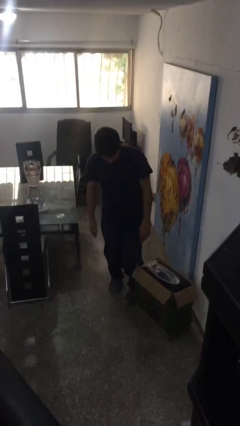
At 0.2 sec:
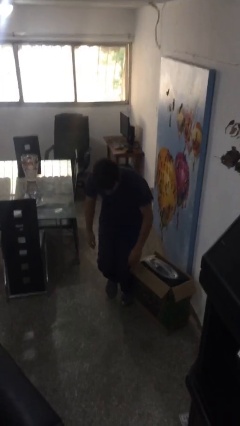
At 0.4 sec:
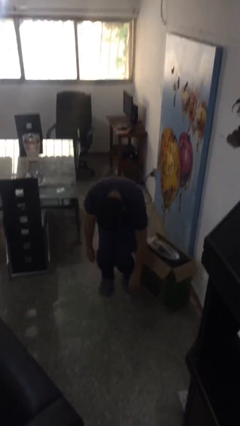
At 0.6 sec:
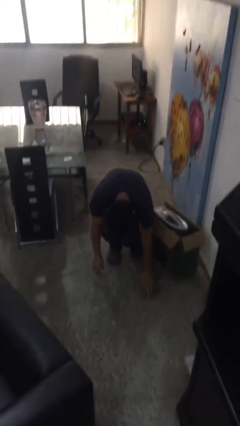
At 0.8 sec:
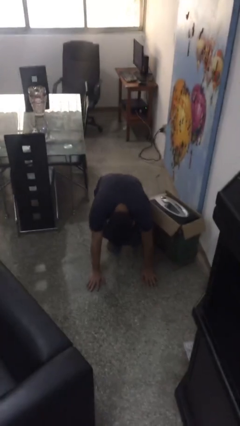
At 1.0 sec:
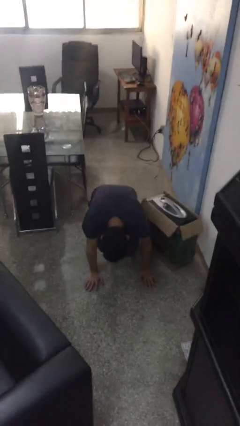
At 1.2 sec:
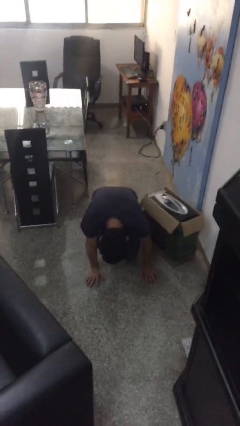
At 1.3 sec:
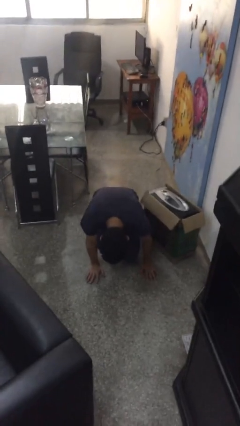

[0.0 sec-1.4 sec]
person trips on object on floor

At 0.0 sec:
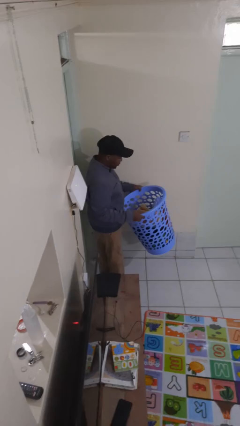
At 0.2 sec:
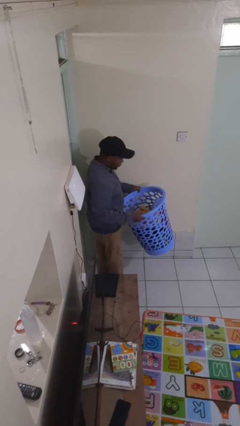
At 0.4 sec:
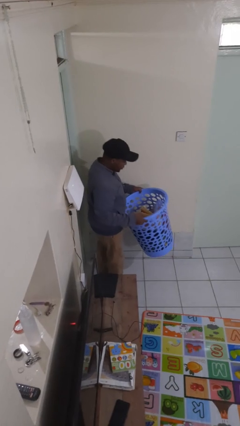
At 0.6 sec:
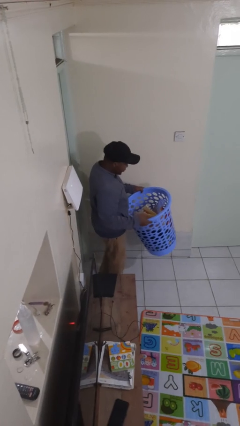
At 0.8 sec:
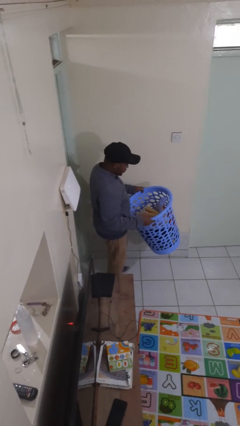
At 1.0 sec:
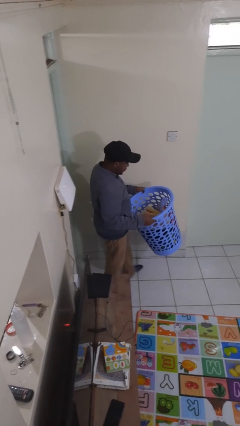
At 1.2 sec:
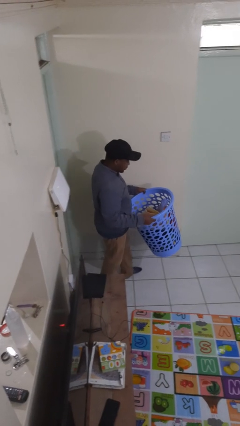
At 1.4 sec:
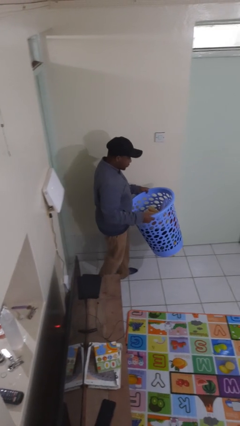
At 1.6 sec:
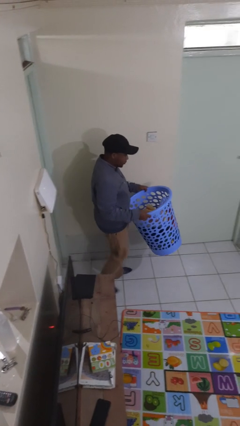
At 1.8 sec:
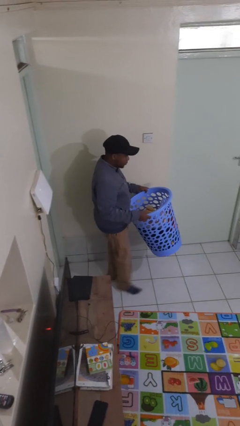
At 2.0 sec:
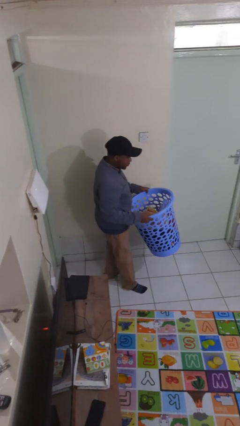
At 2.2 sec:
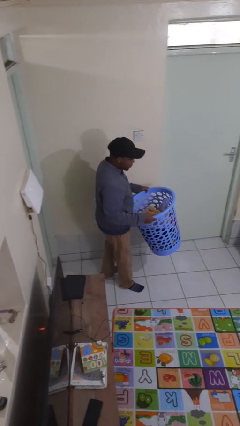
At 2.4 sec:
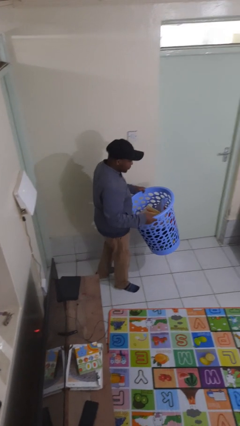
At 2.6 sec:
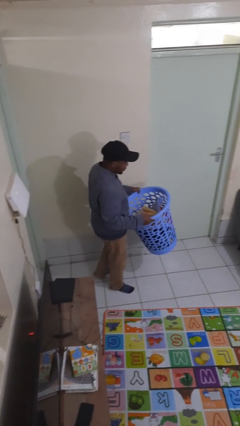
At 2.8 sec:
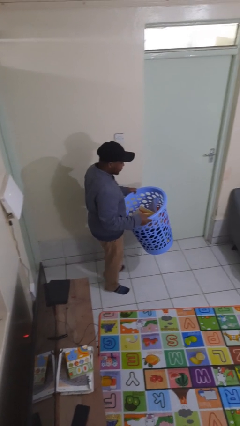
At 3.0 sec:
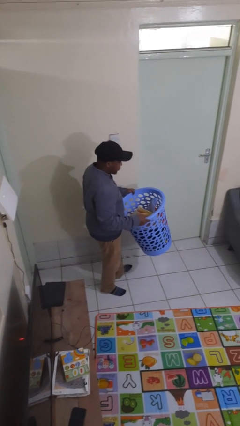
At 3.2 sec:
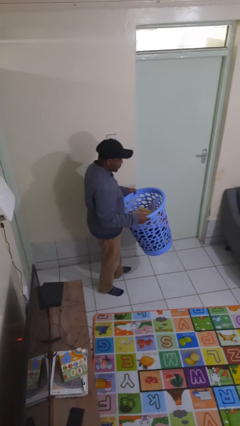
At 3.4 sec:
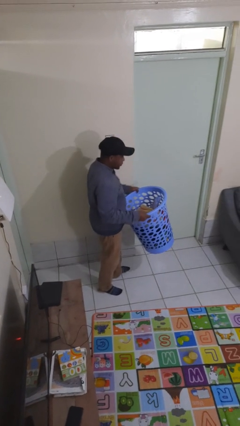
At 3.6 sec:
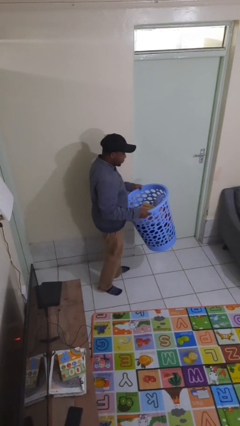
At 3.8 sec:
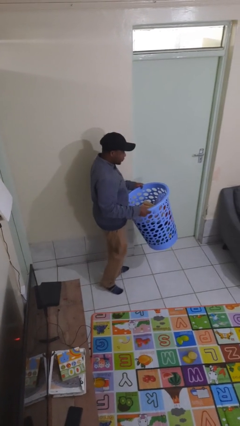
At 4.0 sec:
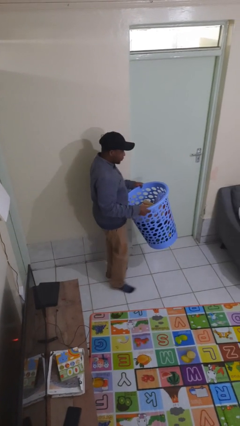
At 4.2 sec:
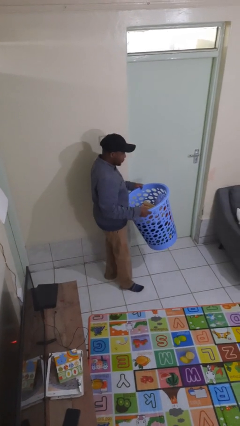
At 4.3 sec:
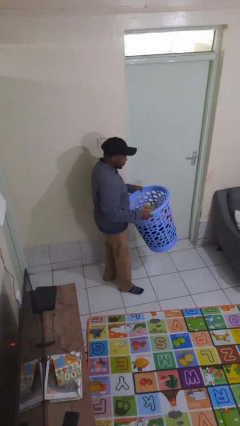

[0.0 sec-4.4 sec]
person carries laundry basket

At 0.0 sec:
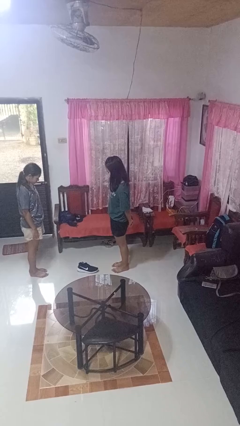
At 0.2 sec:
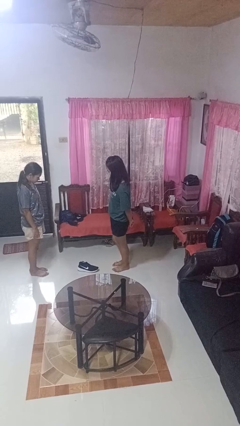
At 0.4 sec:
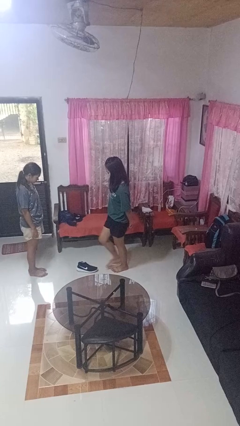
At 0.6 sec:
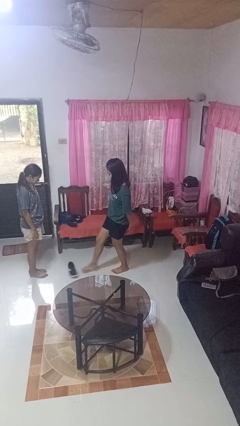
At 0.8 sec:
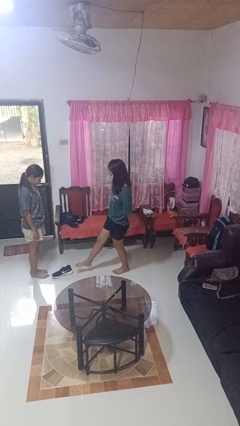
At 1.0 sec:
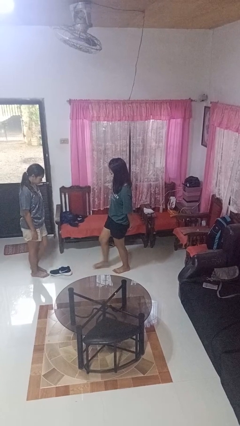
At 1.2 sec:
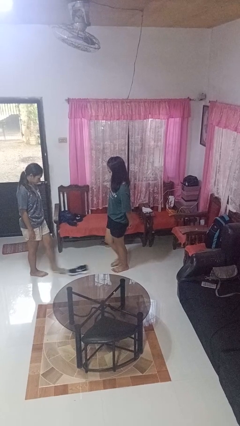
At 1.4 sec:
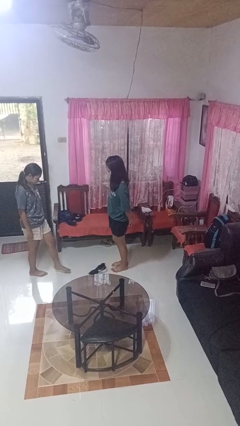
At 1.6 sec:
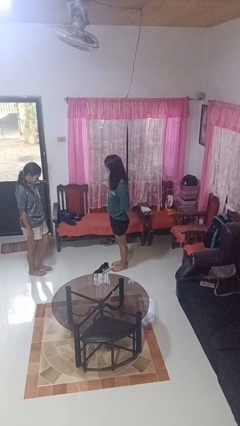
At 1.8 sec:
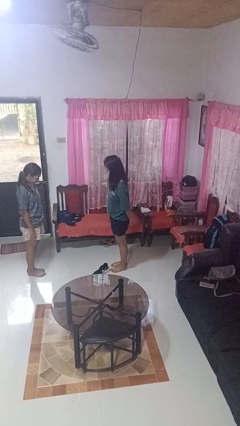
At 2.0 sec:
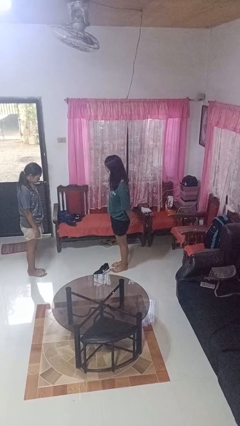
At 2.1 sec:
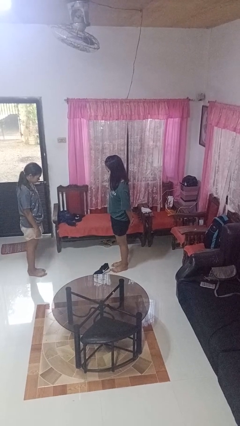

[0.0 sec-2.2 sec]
person kicks object to person

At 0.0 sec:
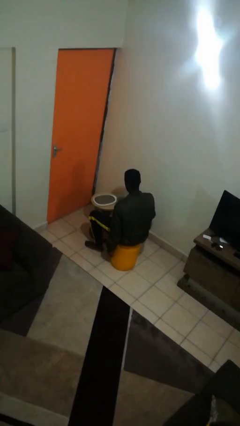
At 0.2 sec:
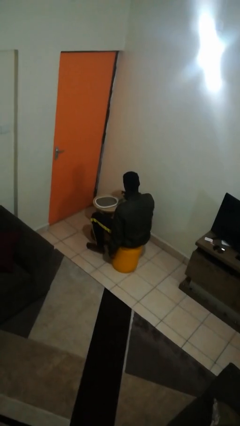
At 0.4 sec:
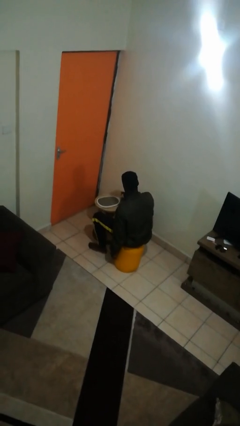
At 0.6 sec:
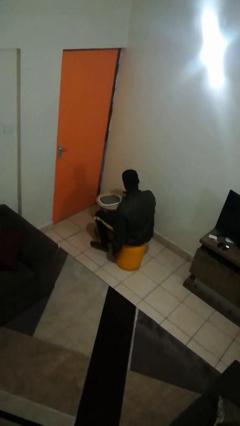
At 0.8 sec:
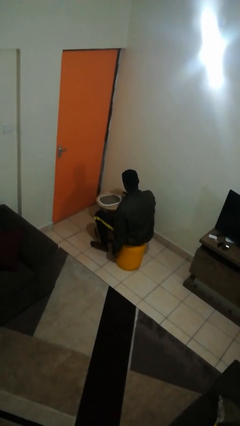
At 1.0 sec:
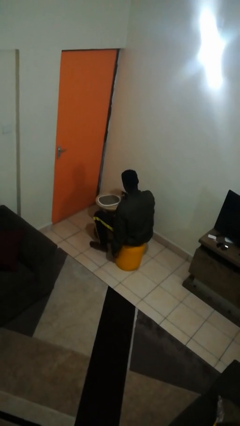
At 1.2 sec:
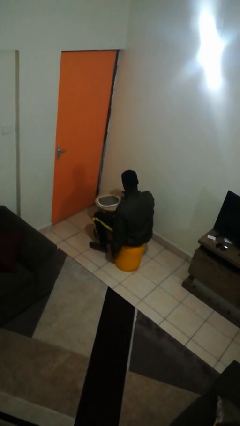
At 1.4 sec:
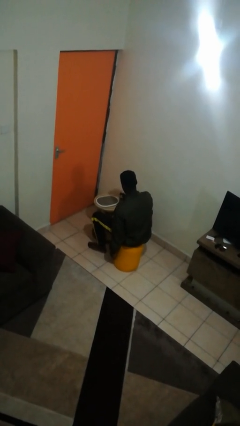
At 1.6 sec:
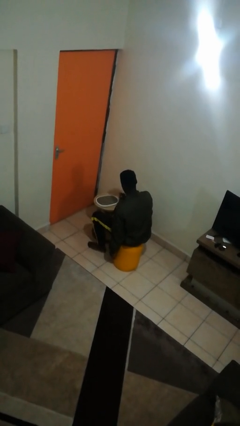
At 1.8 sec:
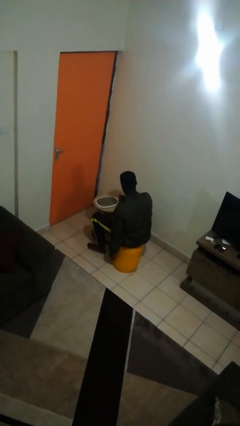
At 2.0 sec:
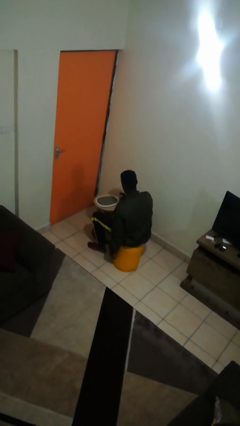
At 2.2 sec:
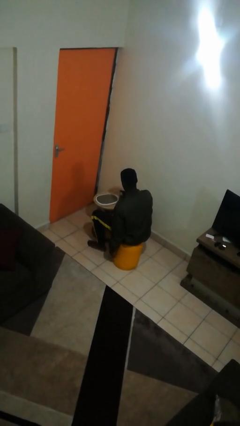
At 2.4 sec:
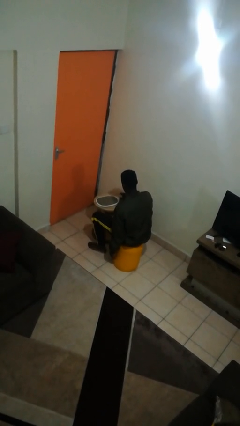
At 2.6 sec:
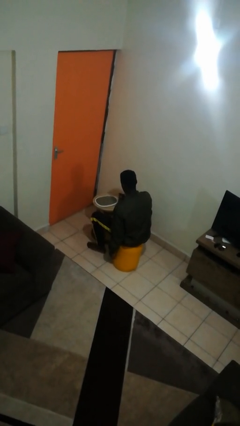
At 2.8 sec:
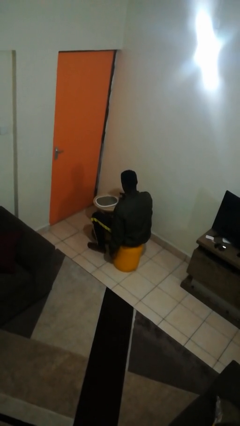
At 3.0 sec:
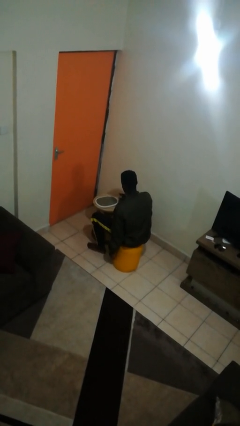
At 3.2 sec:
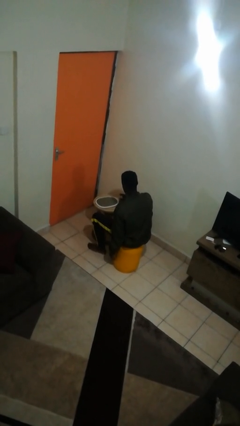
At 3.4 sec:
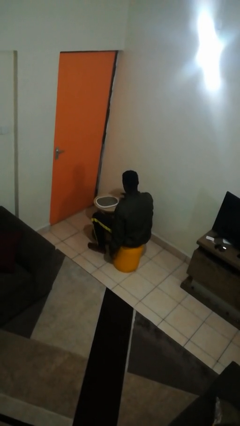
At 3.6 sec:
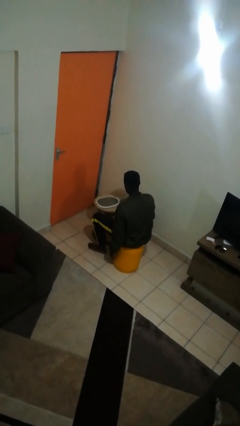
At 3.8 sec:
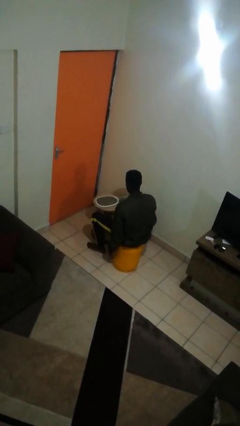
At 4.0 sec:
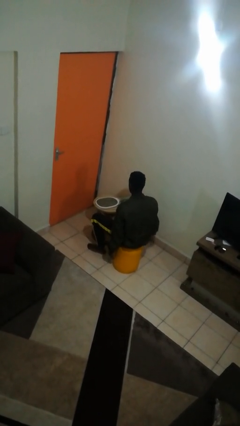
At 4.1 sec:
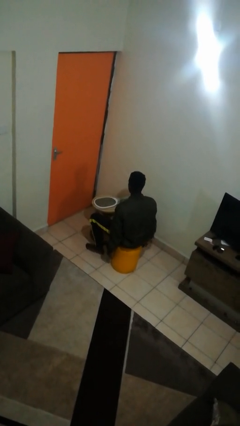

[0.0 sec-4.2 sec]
person taps object with finger

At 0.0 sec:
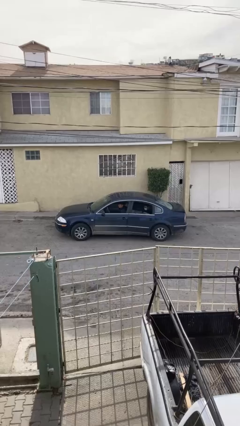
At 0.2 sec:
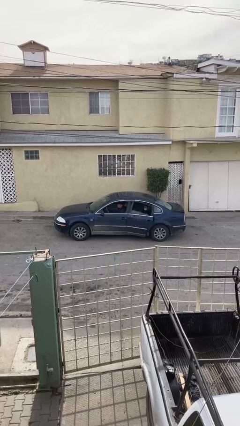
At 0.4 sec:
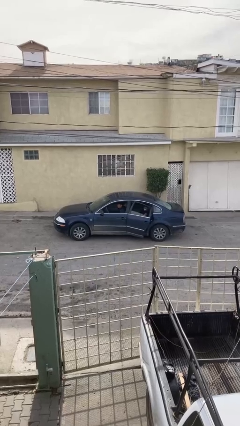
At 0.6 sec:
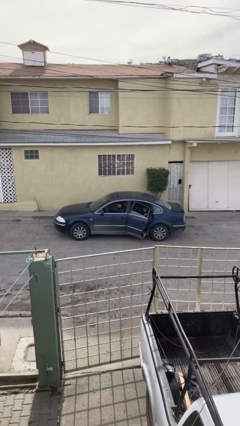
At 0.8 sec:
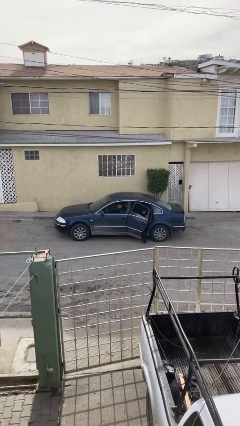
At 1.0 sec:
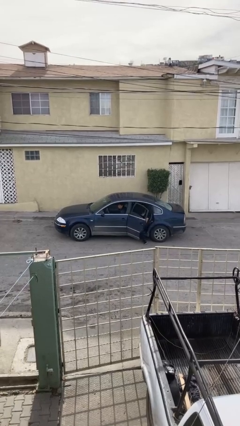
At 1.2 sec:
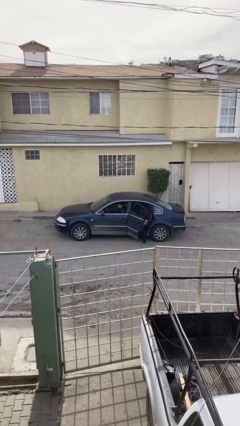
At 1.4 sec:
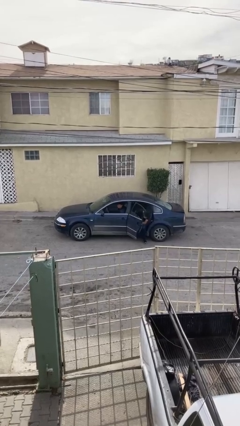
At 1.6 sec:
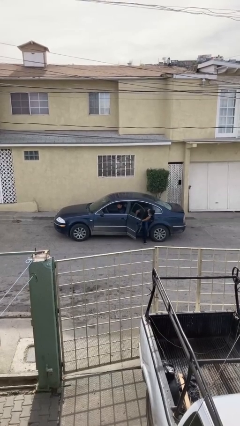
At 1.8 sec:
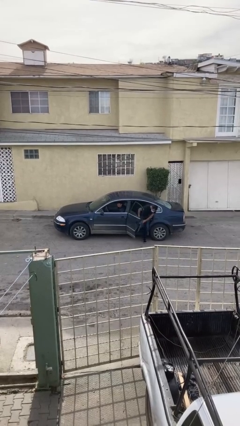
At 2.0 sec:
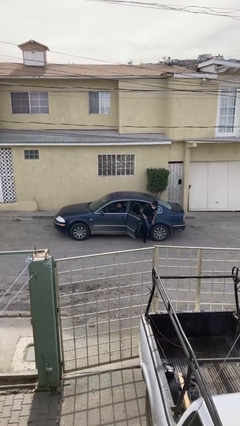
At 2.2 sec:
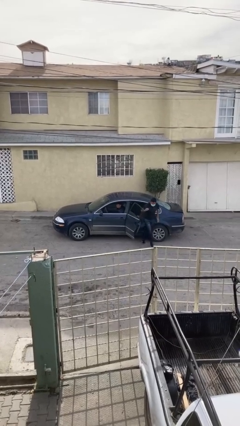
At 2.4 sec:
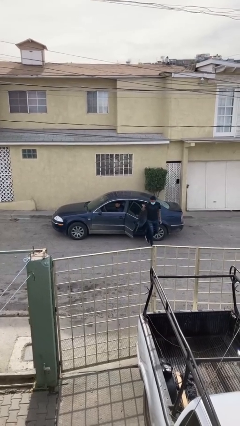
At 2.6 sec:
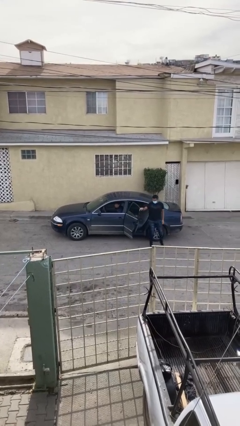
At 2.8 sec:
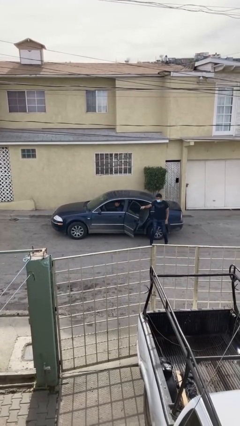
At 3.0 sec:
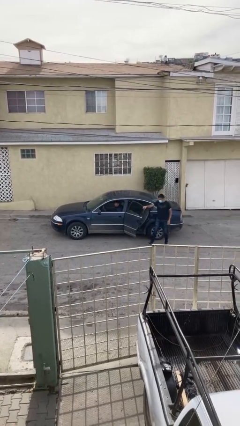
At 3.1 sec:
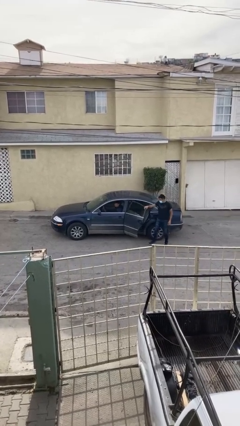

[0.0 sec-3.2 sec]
car drops off person

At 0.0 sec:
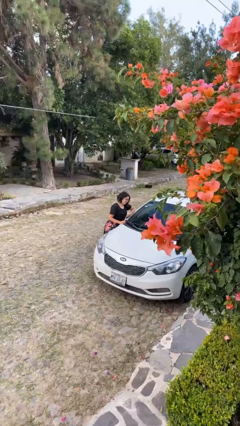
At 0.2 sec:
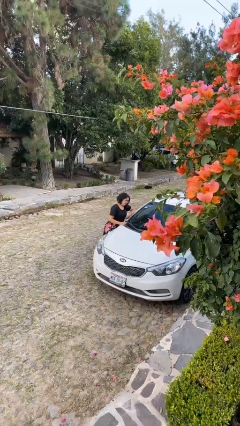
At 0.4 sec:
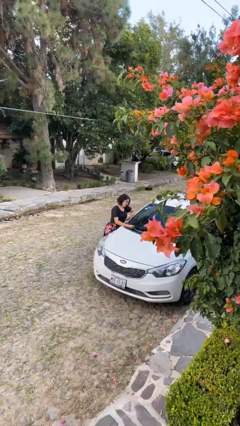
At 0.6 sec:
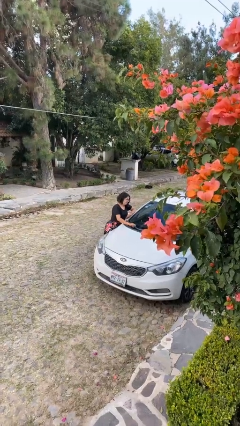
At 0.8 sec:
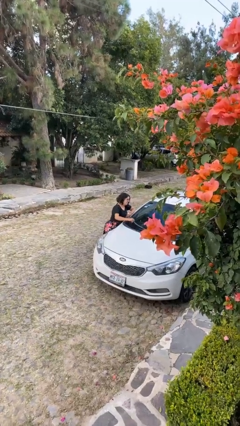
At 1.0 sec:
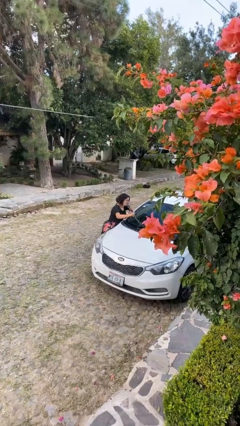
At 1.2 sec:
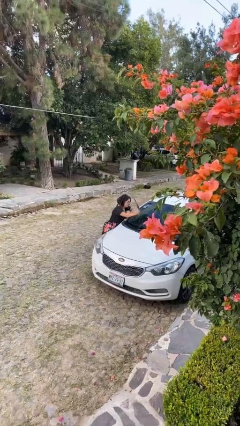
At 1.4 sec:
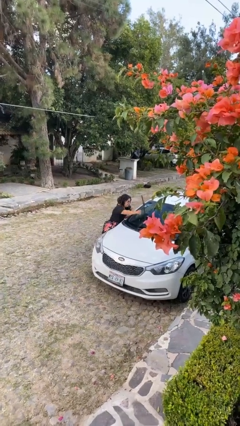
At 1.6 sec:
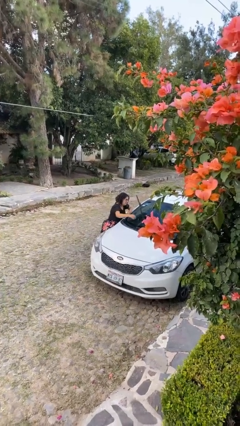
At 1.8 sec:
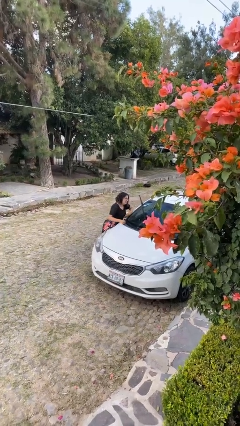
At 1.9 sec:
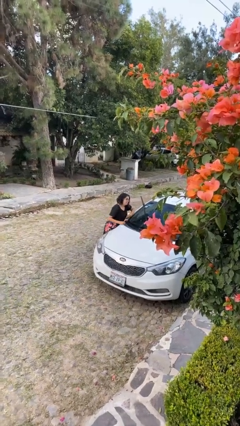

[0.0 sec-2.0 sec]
person flips up car wipers
